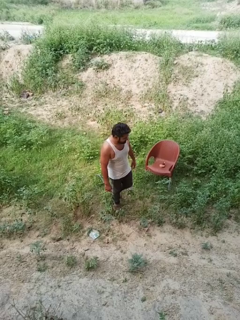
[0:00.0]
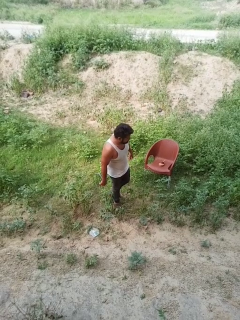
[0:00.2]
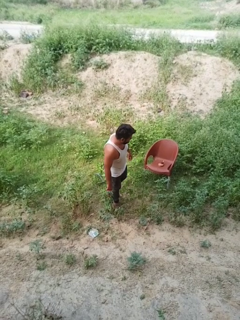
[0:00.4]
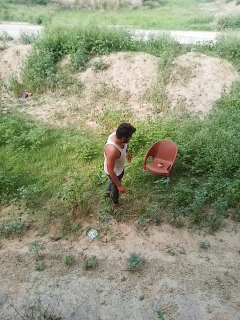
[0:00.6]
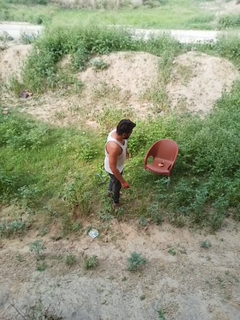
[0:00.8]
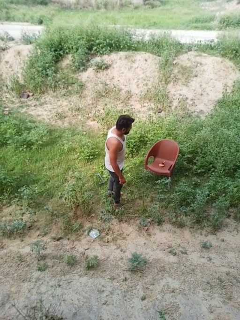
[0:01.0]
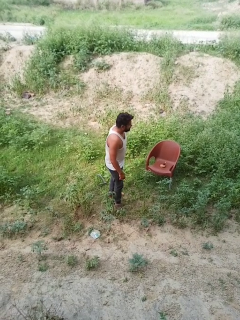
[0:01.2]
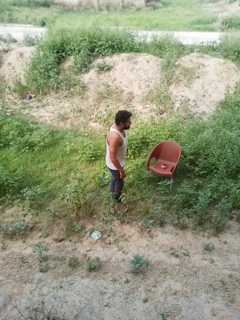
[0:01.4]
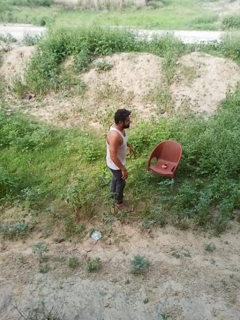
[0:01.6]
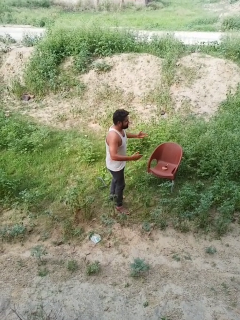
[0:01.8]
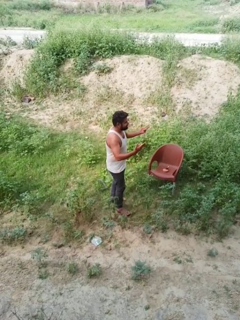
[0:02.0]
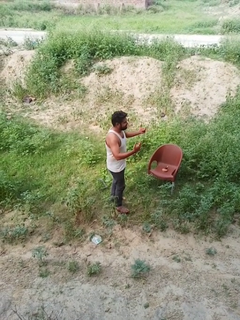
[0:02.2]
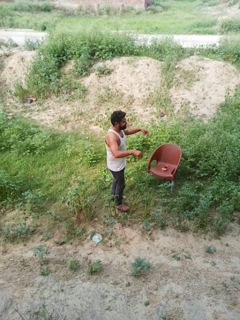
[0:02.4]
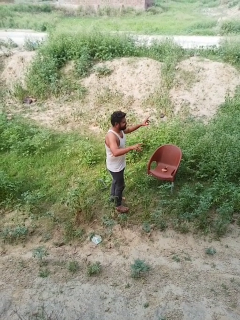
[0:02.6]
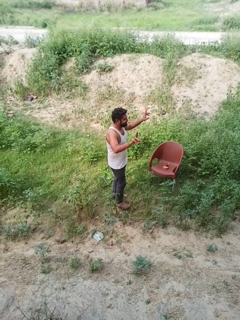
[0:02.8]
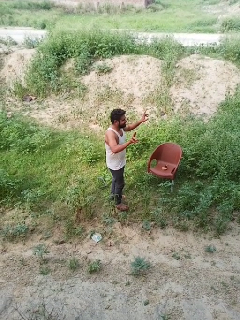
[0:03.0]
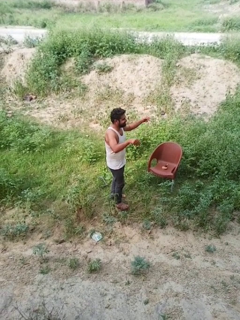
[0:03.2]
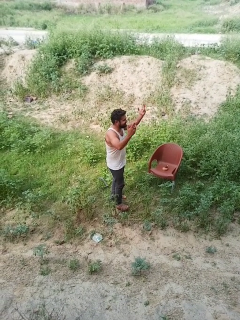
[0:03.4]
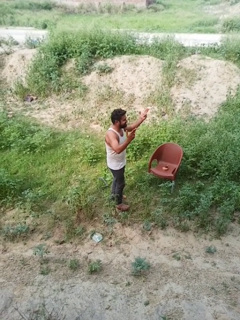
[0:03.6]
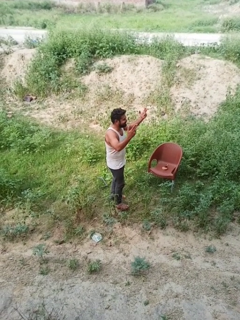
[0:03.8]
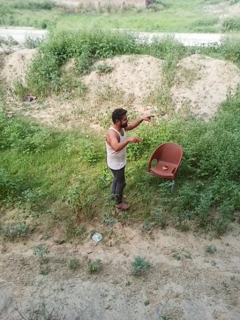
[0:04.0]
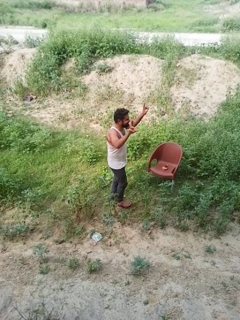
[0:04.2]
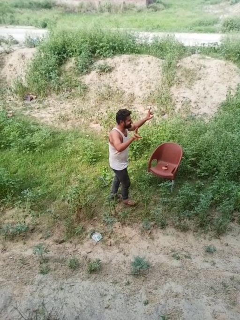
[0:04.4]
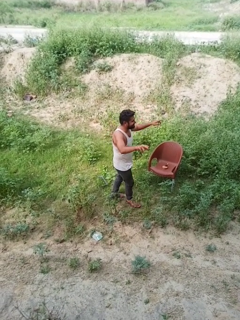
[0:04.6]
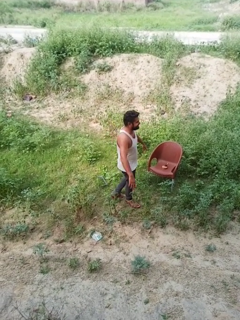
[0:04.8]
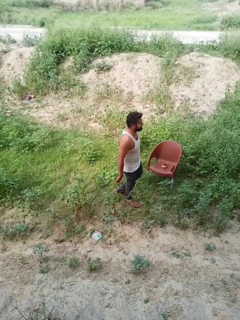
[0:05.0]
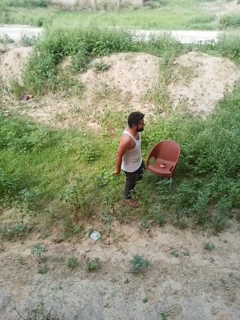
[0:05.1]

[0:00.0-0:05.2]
person dances in place

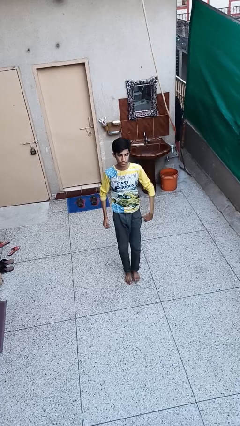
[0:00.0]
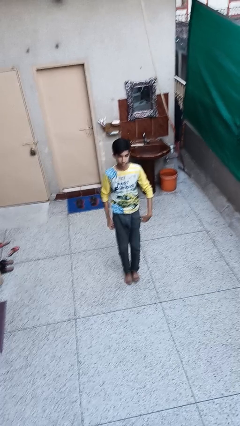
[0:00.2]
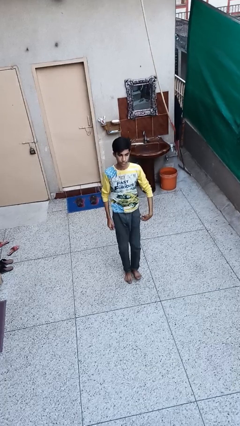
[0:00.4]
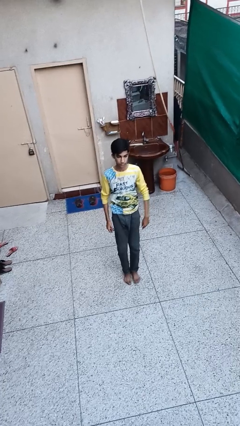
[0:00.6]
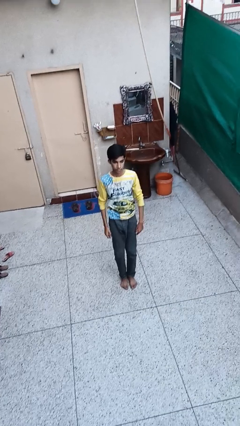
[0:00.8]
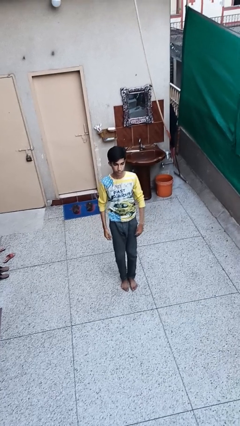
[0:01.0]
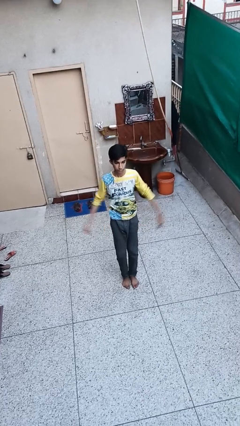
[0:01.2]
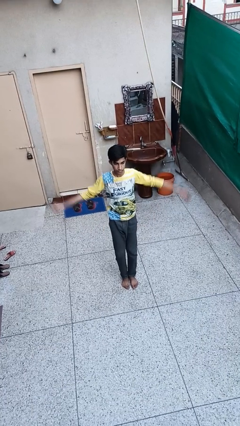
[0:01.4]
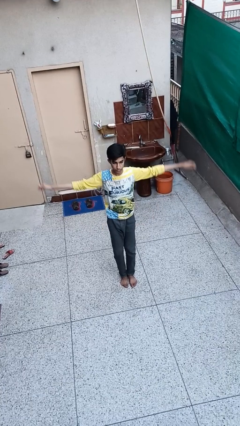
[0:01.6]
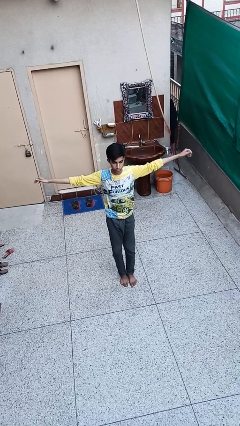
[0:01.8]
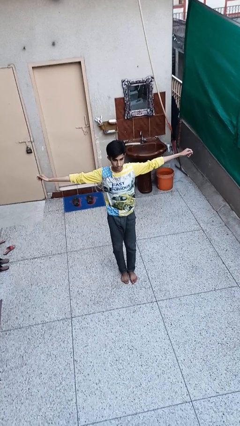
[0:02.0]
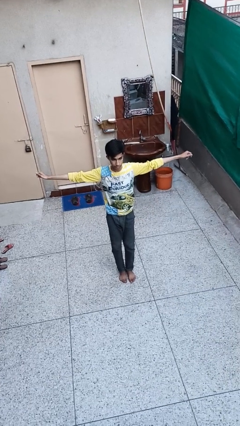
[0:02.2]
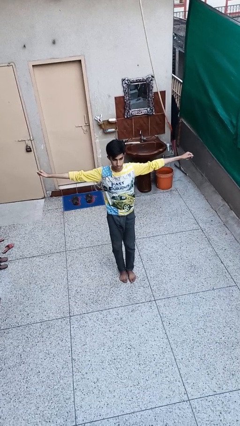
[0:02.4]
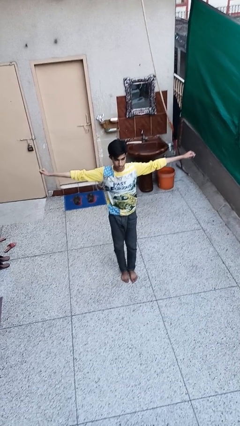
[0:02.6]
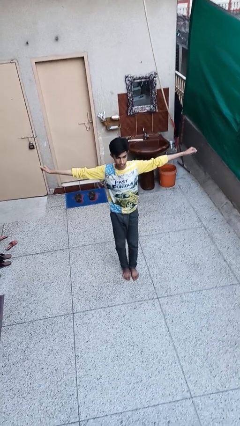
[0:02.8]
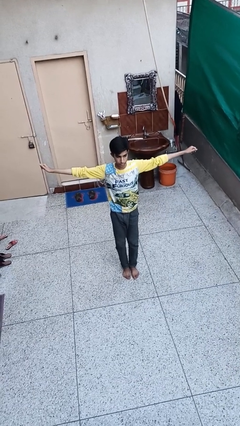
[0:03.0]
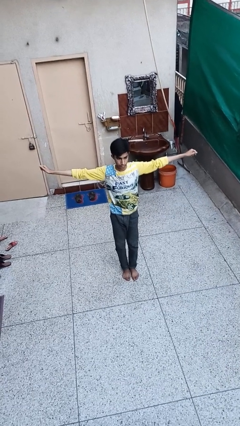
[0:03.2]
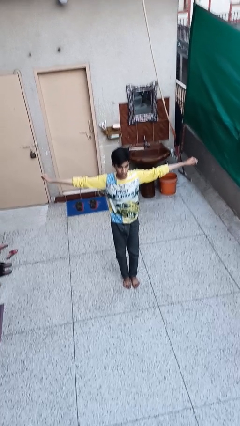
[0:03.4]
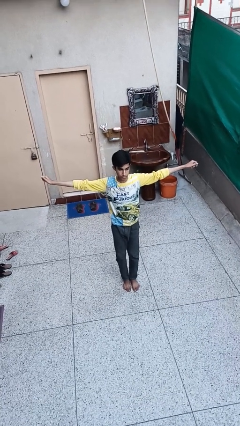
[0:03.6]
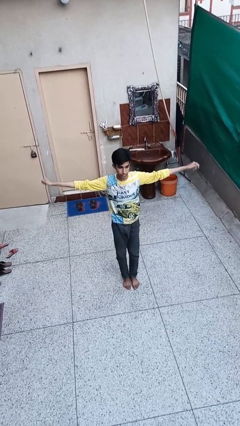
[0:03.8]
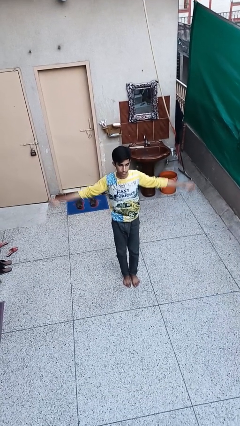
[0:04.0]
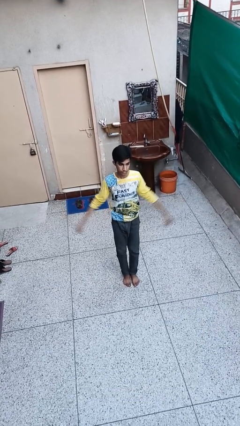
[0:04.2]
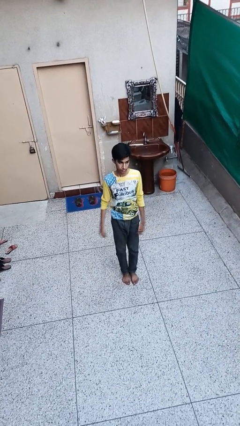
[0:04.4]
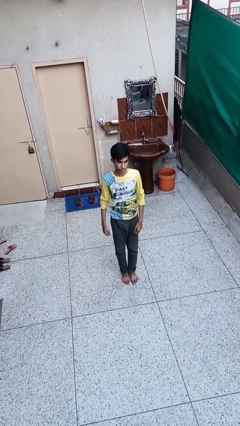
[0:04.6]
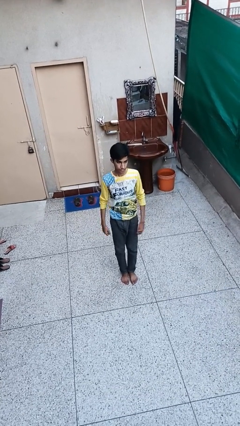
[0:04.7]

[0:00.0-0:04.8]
person stretches arms to side

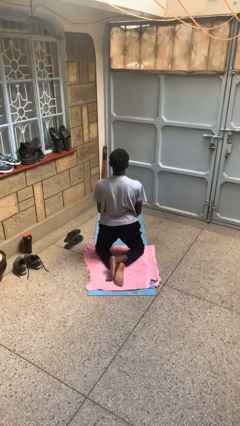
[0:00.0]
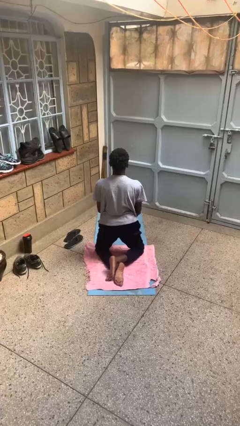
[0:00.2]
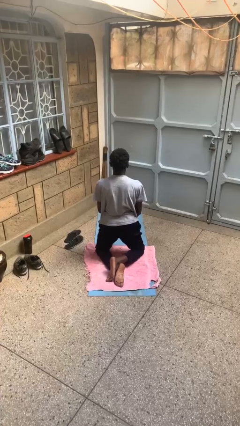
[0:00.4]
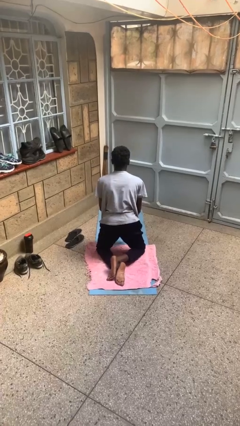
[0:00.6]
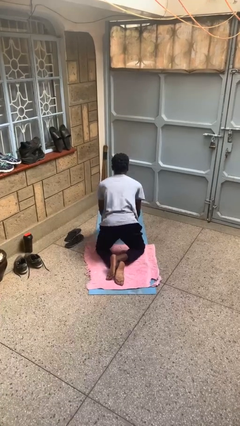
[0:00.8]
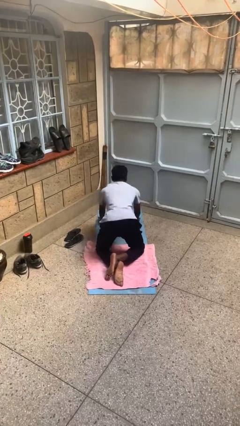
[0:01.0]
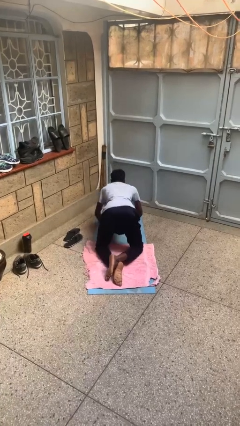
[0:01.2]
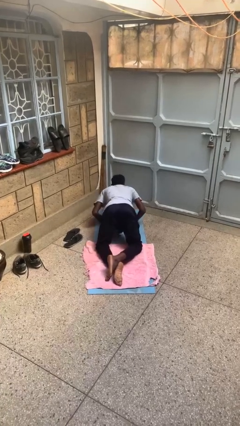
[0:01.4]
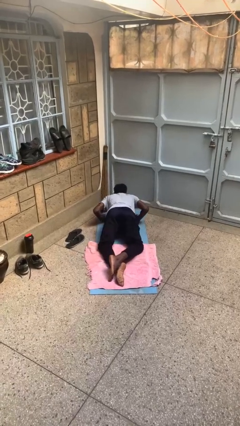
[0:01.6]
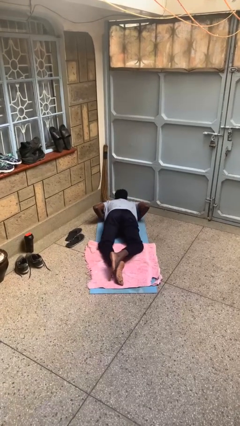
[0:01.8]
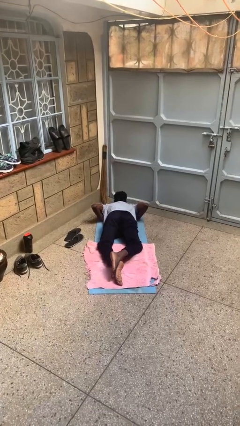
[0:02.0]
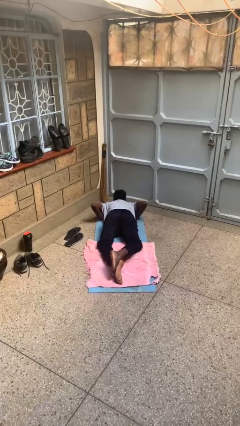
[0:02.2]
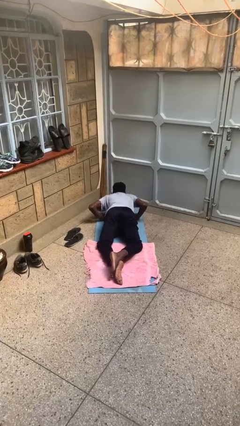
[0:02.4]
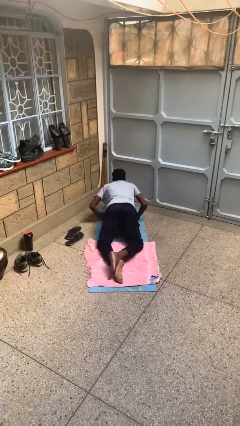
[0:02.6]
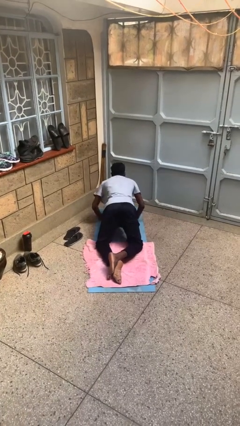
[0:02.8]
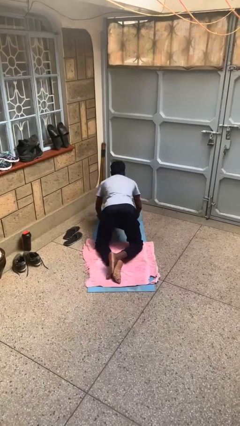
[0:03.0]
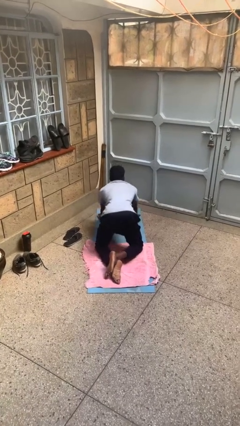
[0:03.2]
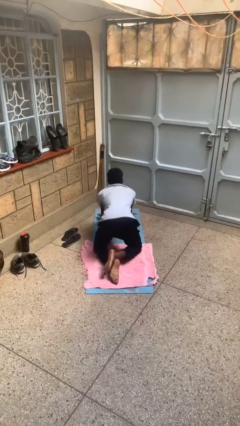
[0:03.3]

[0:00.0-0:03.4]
person exercises with pushup

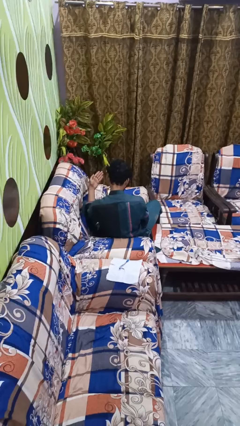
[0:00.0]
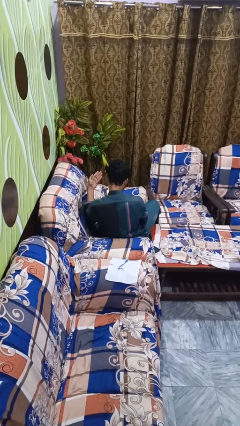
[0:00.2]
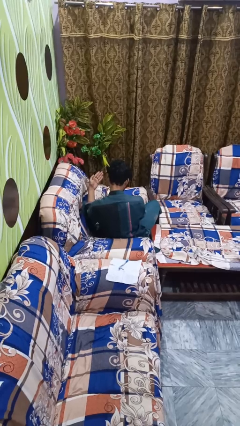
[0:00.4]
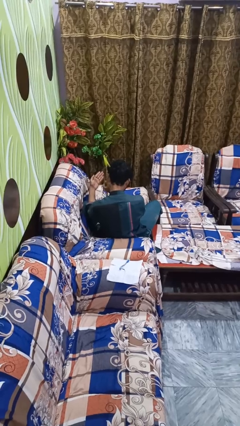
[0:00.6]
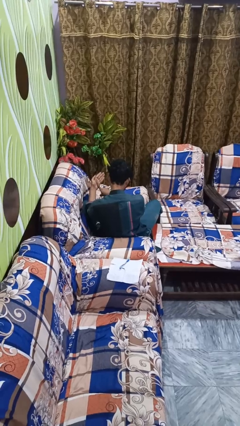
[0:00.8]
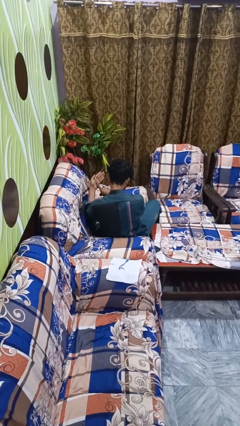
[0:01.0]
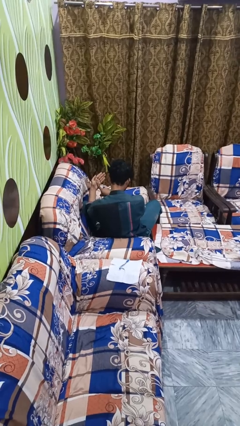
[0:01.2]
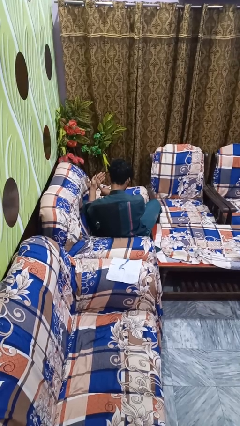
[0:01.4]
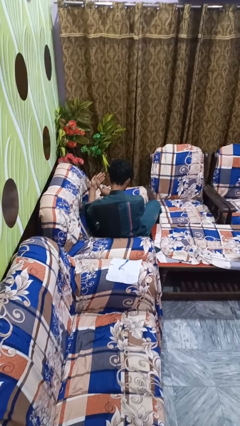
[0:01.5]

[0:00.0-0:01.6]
person gestures number one

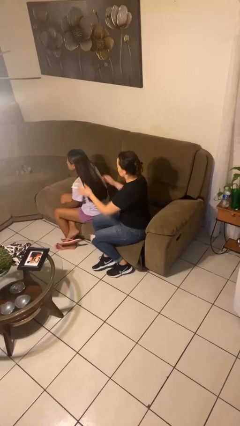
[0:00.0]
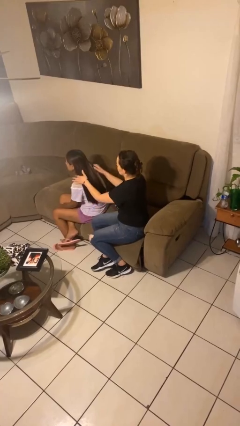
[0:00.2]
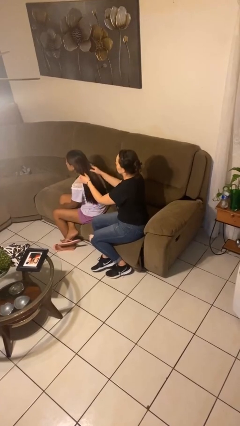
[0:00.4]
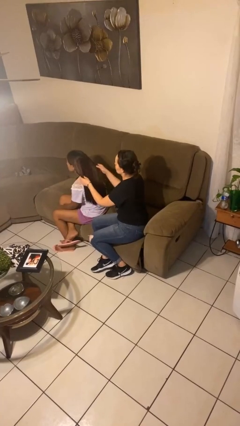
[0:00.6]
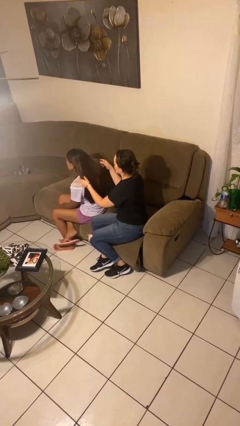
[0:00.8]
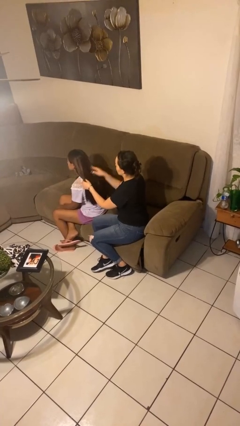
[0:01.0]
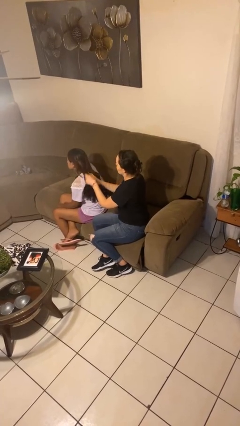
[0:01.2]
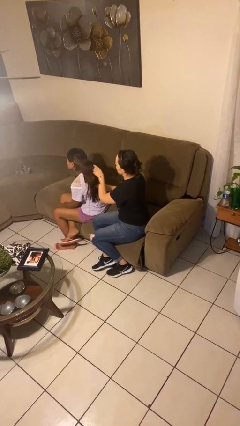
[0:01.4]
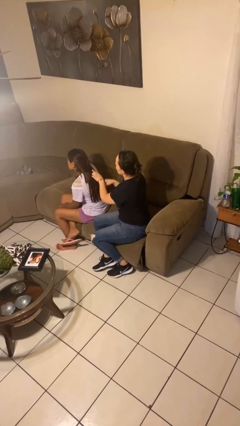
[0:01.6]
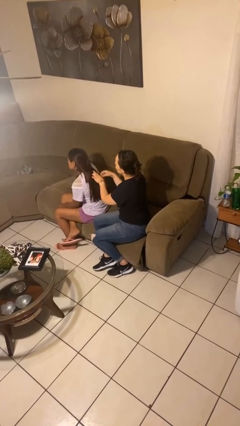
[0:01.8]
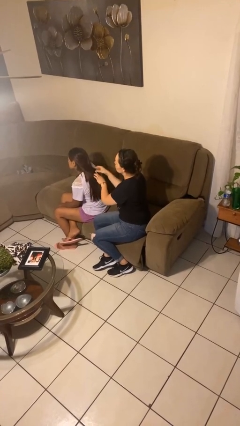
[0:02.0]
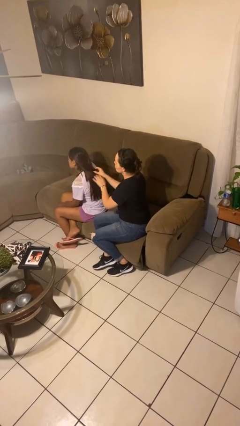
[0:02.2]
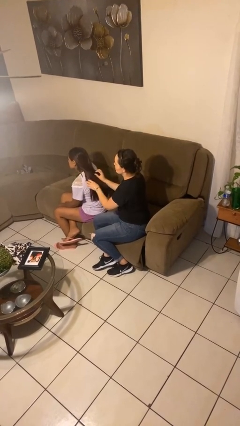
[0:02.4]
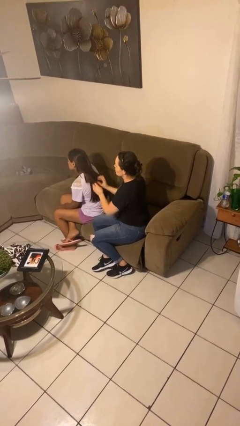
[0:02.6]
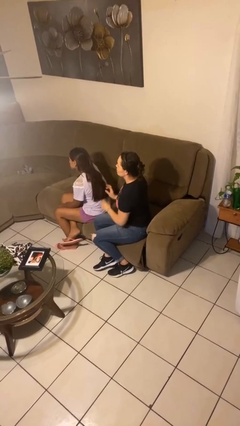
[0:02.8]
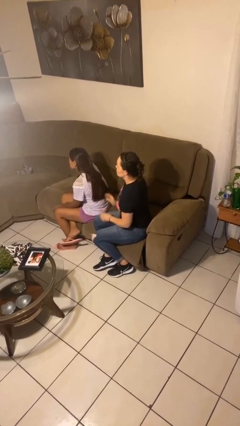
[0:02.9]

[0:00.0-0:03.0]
person braids hair of person

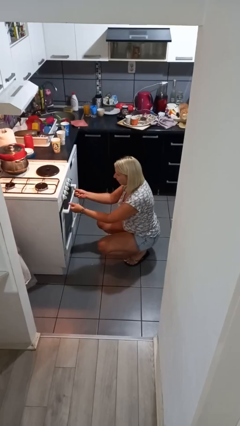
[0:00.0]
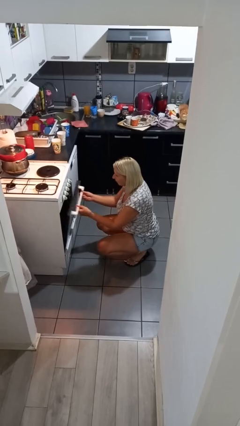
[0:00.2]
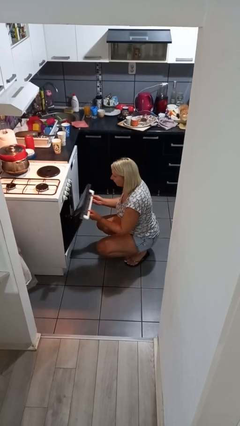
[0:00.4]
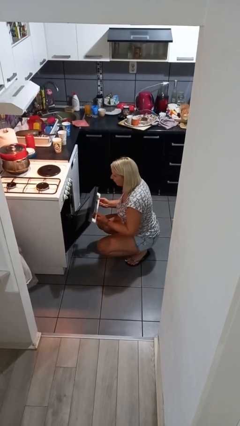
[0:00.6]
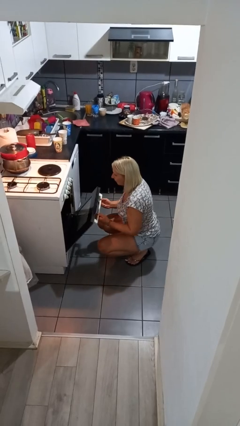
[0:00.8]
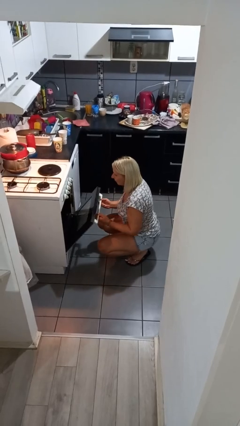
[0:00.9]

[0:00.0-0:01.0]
person opens oven door
